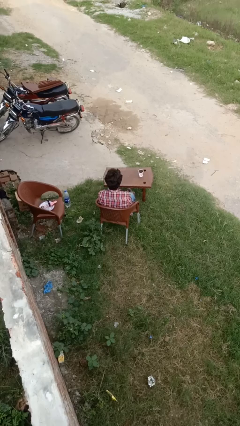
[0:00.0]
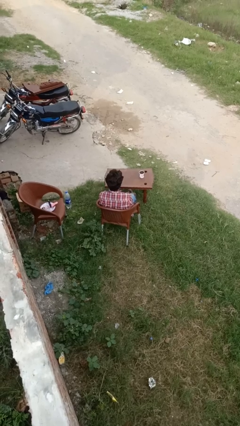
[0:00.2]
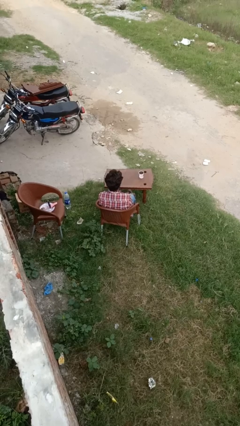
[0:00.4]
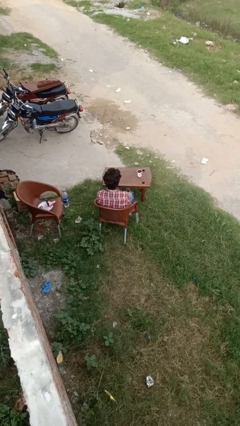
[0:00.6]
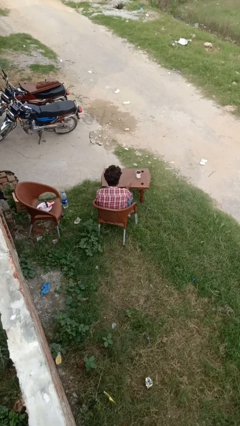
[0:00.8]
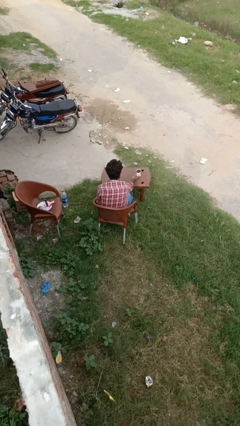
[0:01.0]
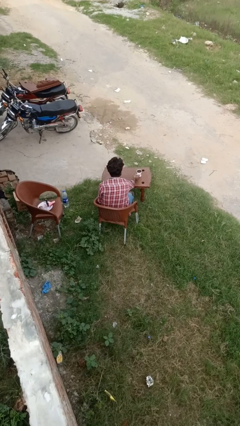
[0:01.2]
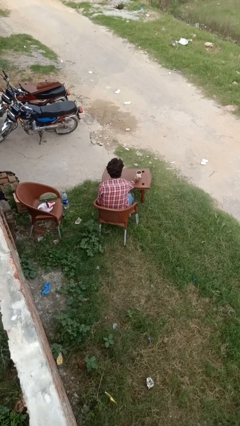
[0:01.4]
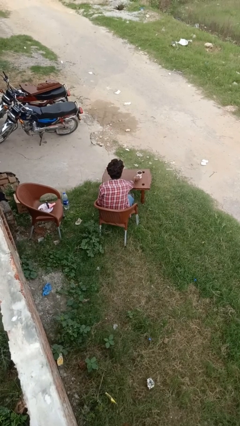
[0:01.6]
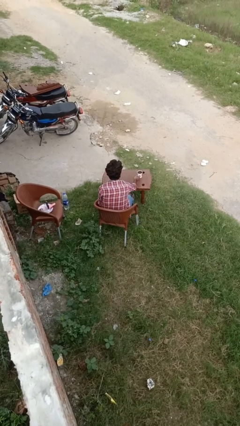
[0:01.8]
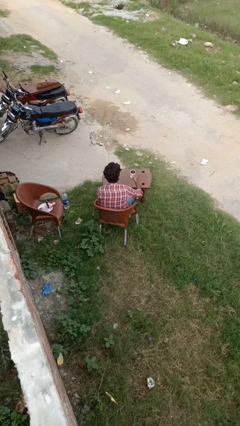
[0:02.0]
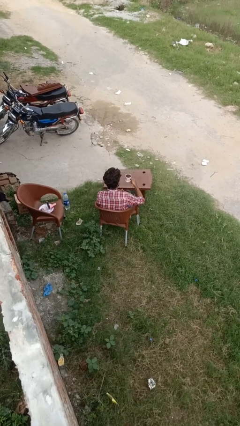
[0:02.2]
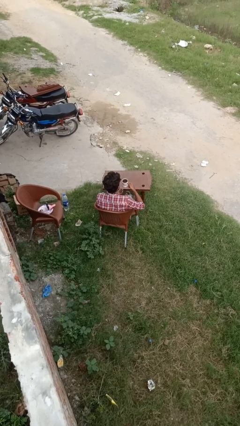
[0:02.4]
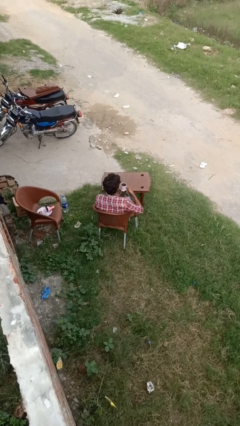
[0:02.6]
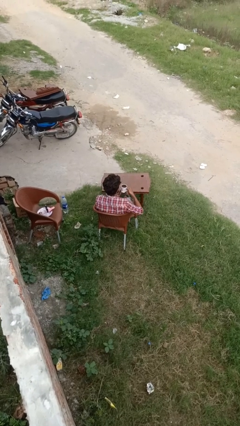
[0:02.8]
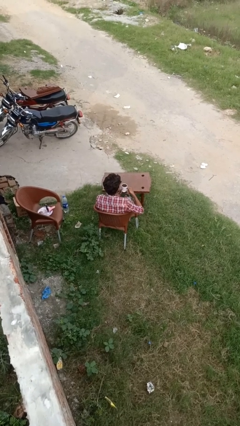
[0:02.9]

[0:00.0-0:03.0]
person picks up object from table

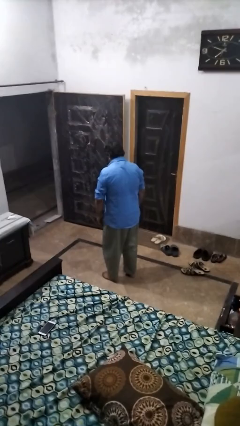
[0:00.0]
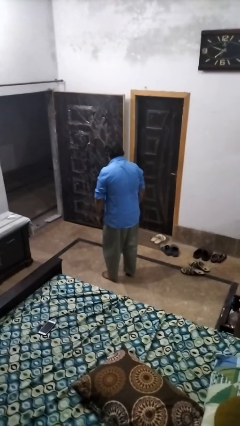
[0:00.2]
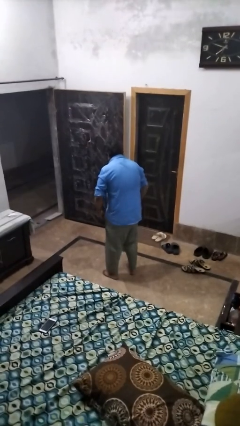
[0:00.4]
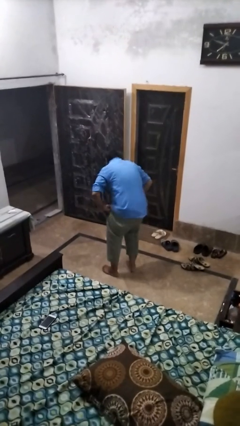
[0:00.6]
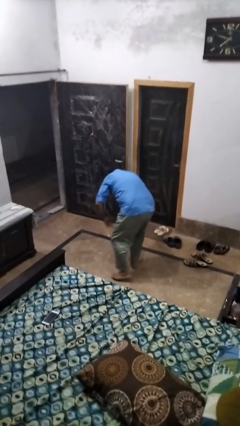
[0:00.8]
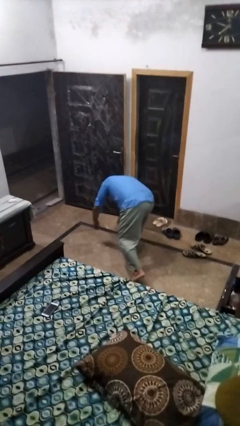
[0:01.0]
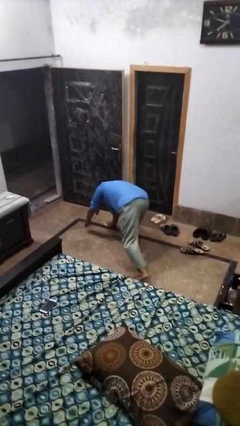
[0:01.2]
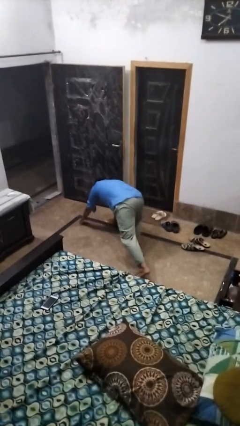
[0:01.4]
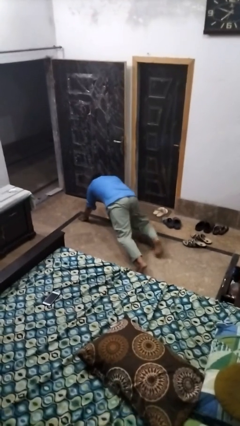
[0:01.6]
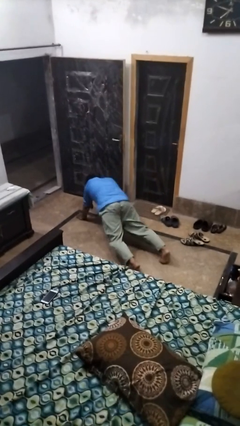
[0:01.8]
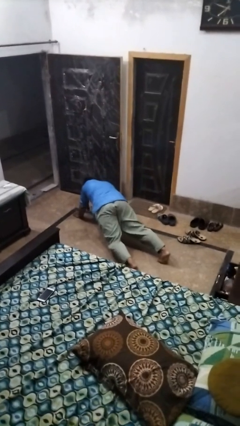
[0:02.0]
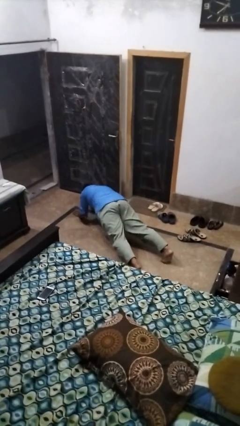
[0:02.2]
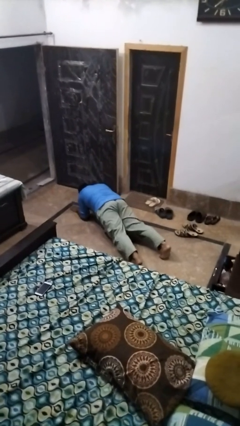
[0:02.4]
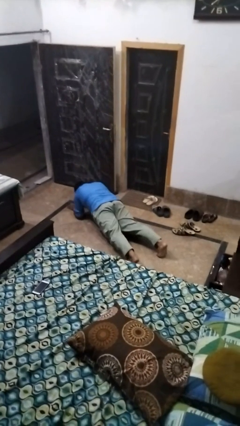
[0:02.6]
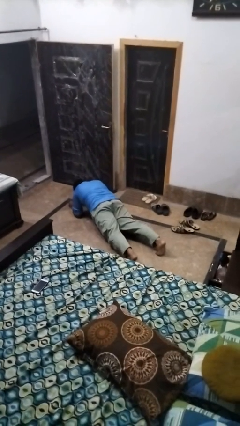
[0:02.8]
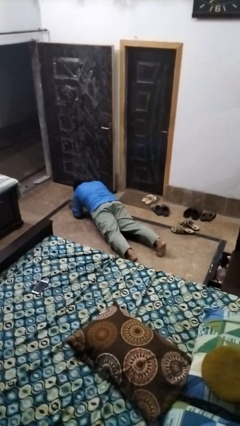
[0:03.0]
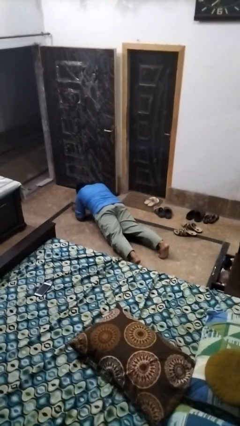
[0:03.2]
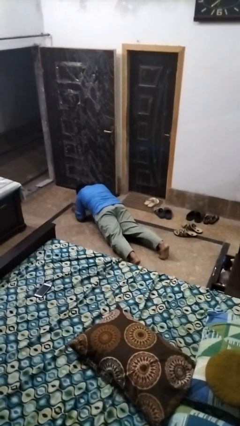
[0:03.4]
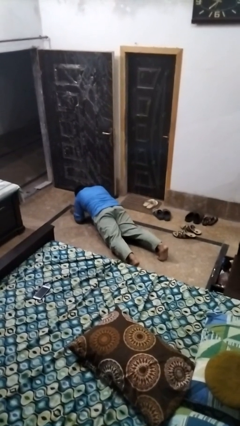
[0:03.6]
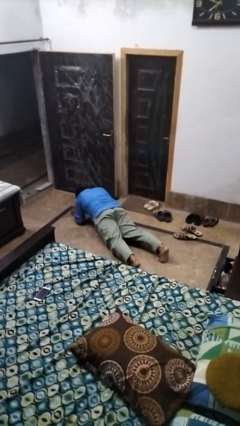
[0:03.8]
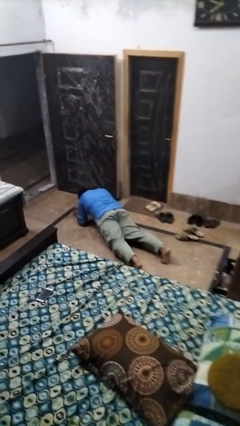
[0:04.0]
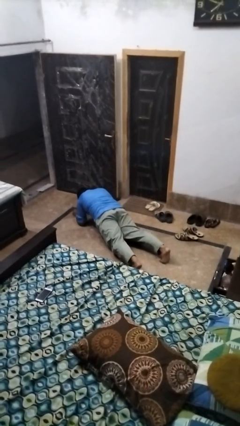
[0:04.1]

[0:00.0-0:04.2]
person exercises with plank

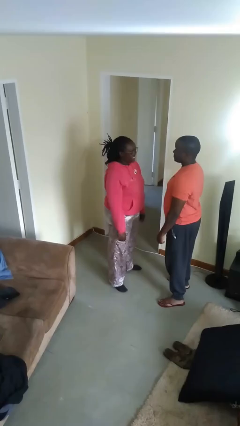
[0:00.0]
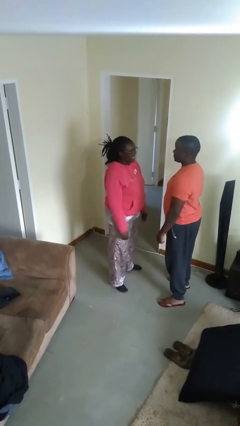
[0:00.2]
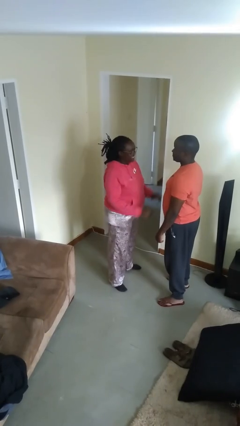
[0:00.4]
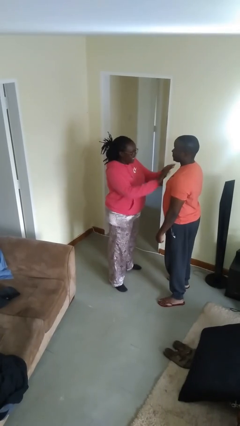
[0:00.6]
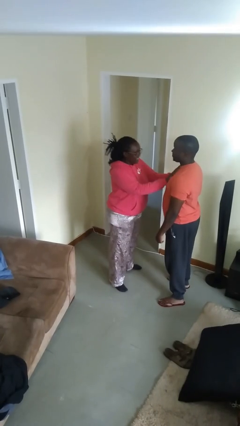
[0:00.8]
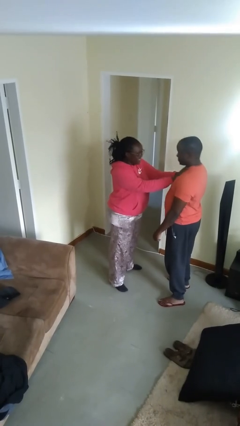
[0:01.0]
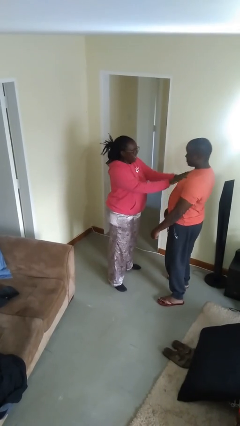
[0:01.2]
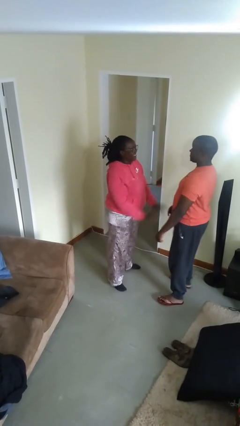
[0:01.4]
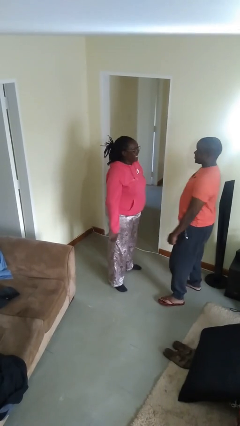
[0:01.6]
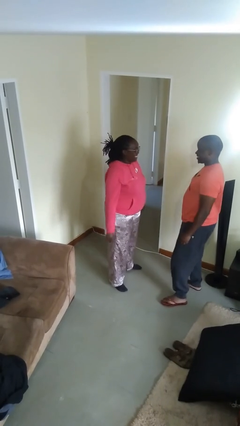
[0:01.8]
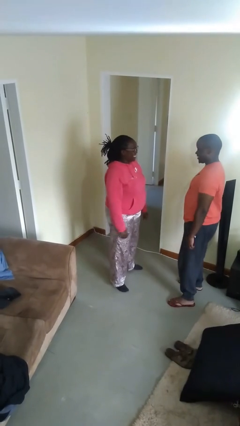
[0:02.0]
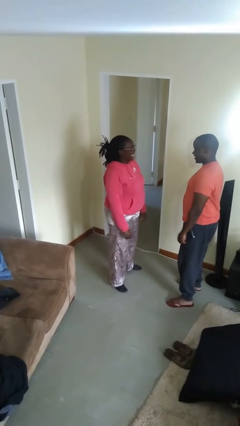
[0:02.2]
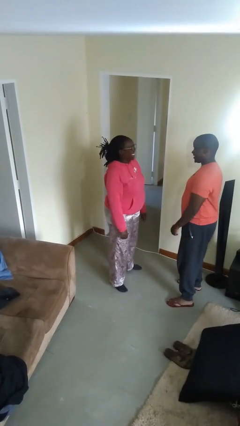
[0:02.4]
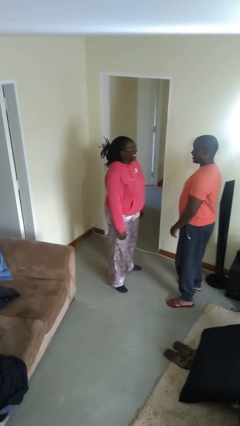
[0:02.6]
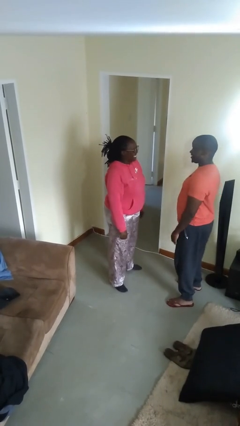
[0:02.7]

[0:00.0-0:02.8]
person shoves person

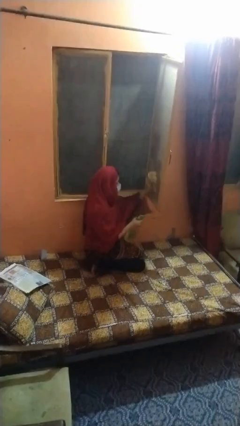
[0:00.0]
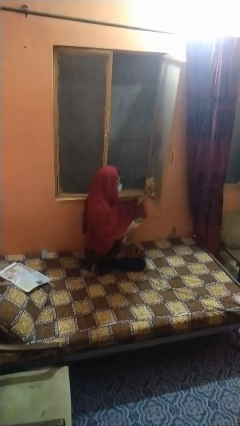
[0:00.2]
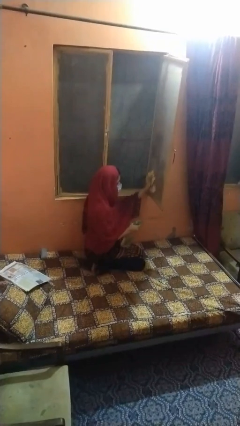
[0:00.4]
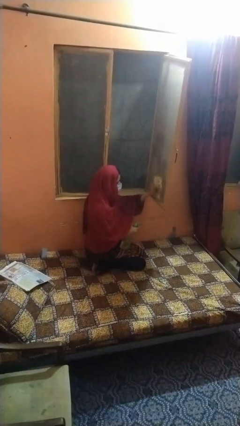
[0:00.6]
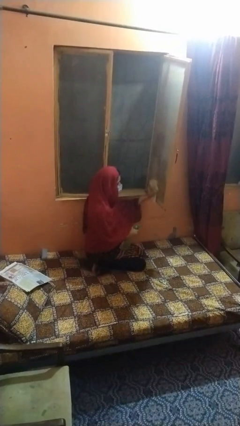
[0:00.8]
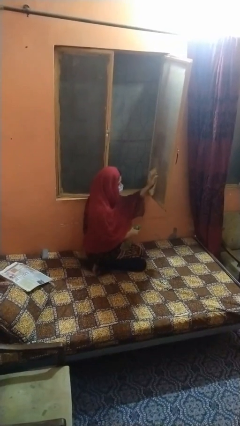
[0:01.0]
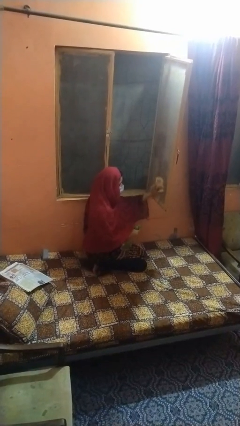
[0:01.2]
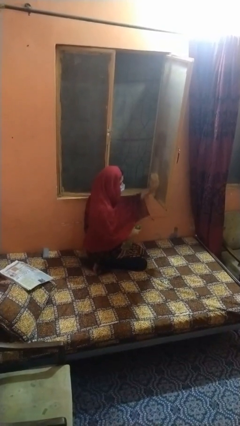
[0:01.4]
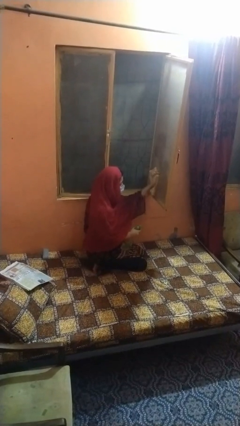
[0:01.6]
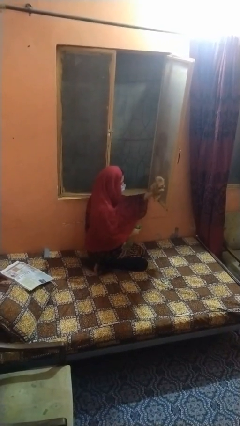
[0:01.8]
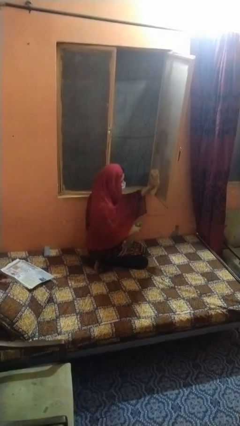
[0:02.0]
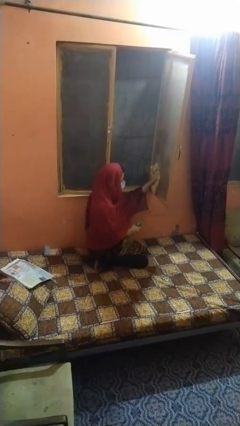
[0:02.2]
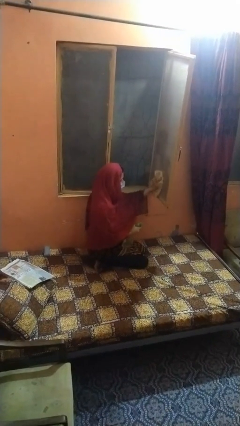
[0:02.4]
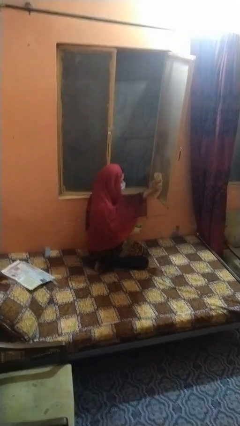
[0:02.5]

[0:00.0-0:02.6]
person washes window

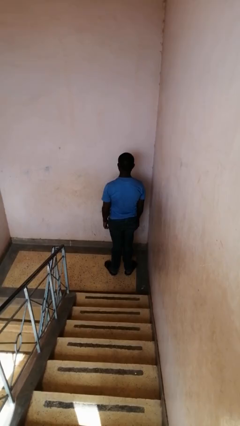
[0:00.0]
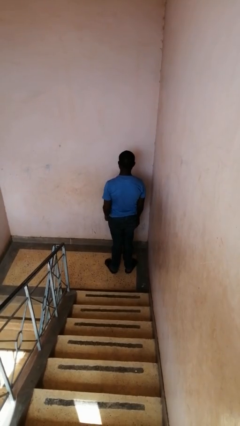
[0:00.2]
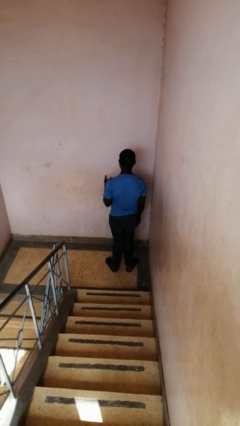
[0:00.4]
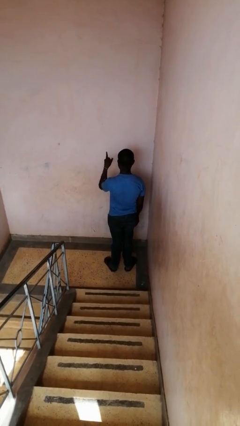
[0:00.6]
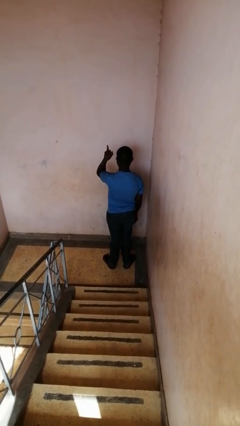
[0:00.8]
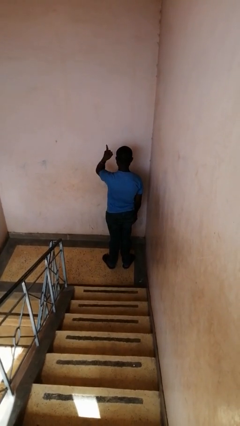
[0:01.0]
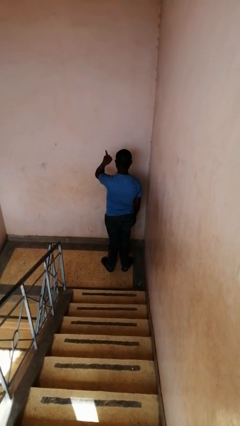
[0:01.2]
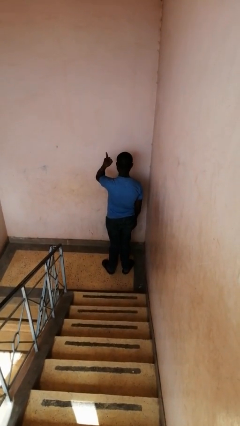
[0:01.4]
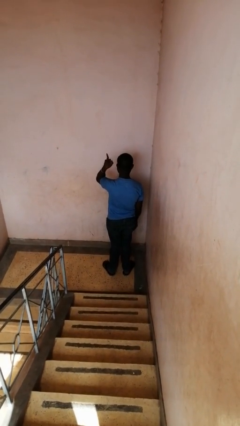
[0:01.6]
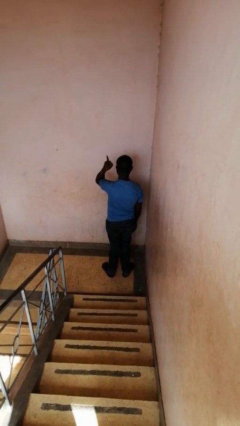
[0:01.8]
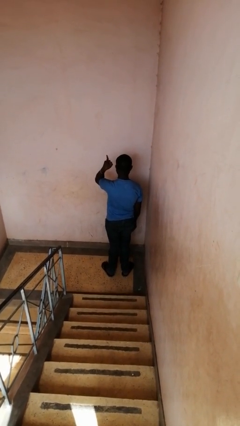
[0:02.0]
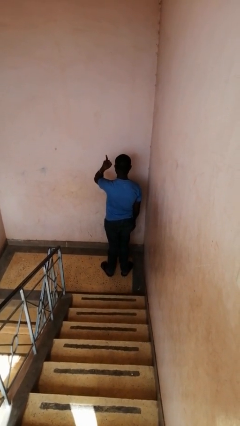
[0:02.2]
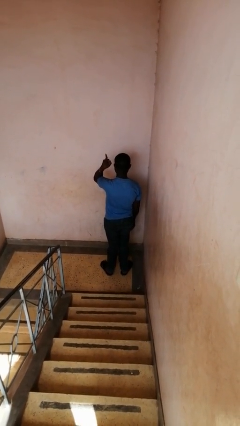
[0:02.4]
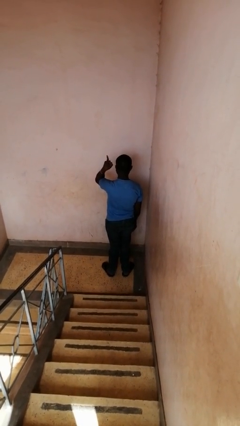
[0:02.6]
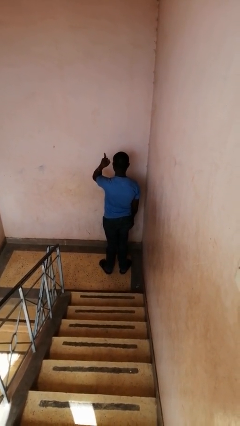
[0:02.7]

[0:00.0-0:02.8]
person gestures number one

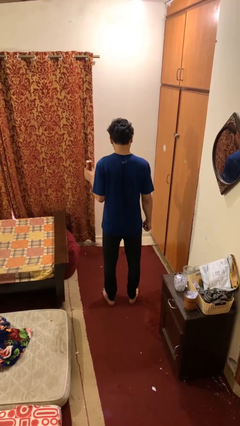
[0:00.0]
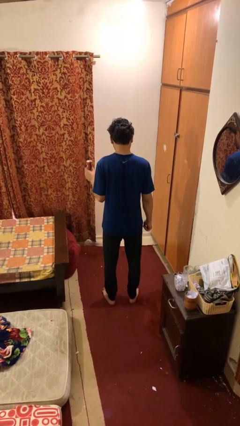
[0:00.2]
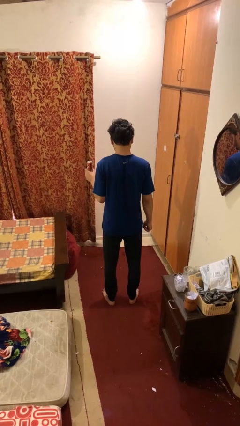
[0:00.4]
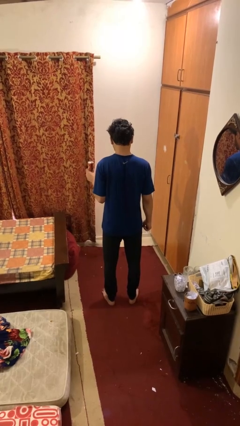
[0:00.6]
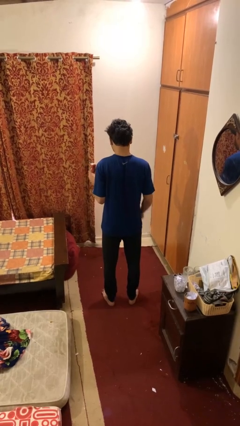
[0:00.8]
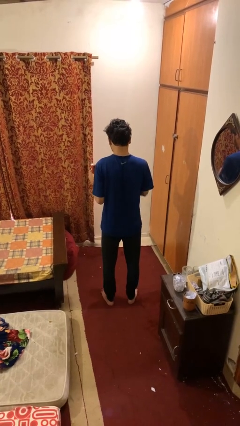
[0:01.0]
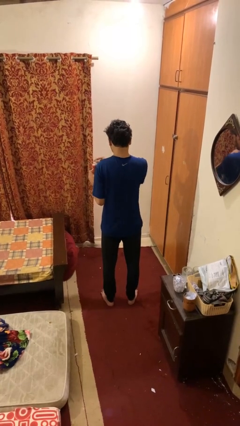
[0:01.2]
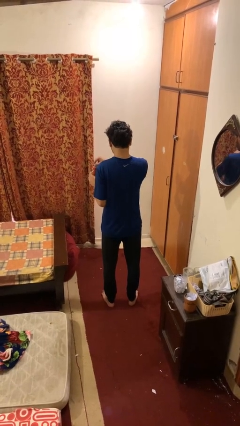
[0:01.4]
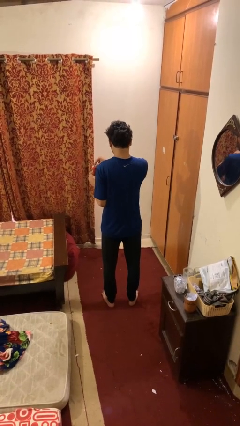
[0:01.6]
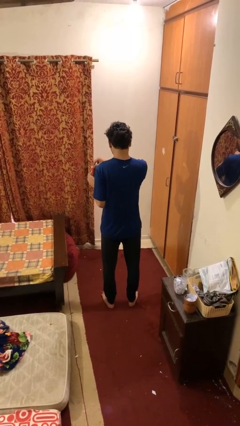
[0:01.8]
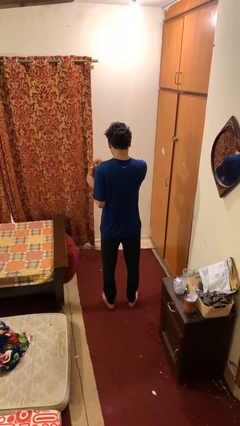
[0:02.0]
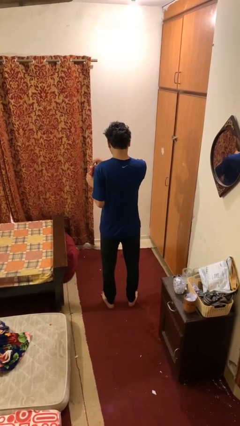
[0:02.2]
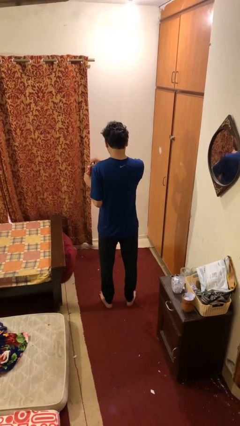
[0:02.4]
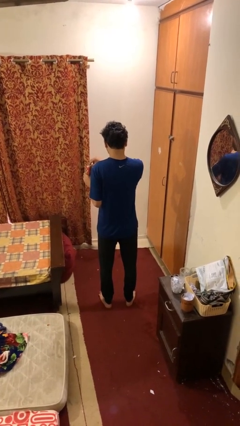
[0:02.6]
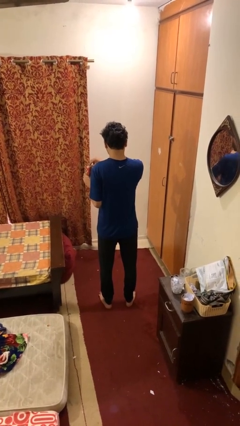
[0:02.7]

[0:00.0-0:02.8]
person opens beverage can
